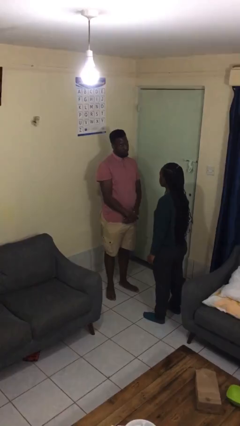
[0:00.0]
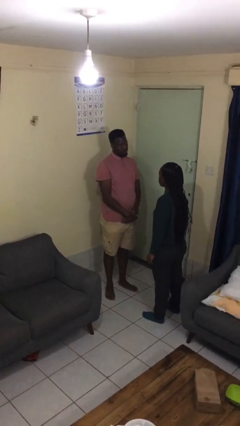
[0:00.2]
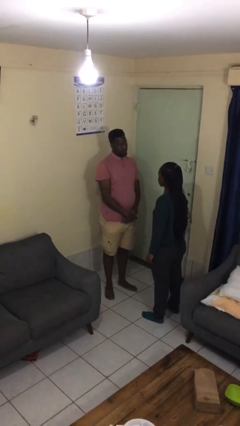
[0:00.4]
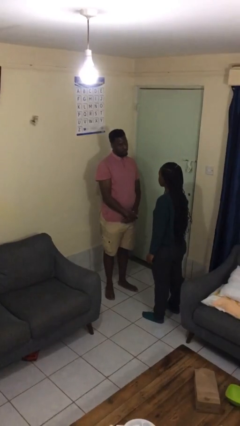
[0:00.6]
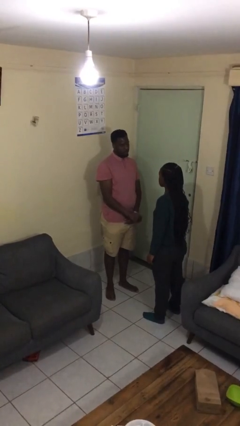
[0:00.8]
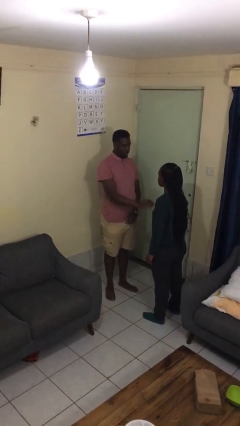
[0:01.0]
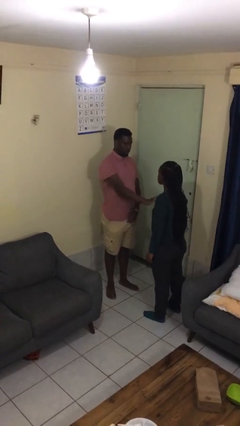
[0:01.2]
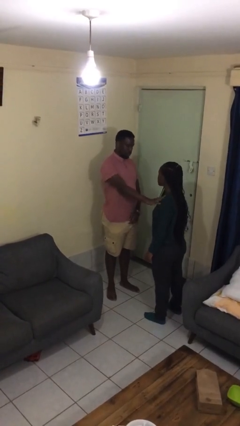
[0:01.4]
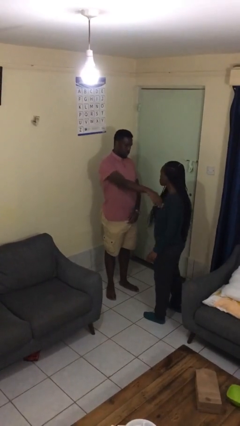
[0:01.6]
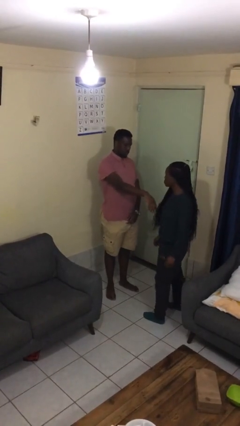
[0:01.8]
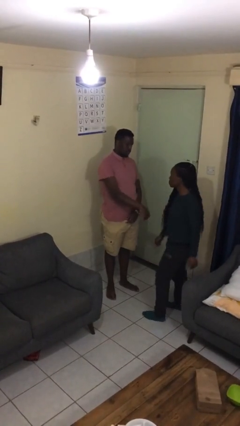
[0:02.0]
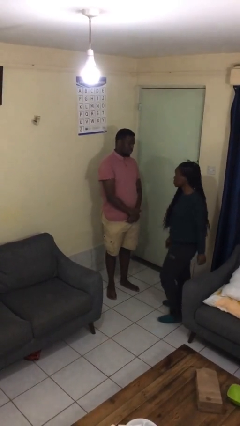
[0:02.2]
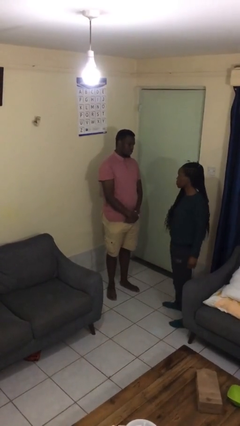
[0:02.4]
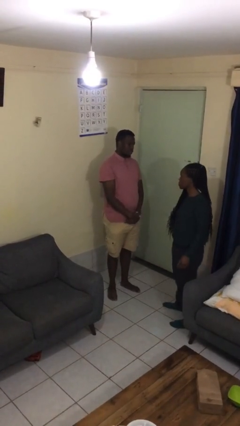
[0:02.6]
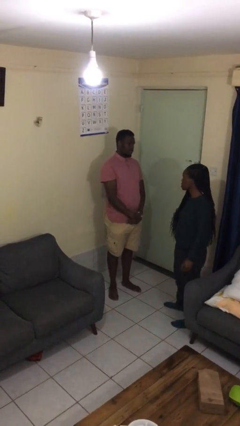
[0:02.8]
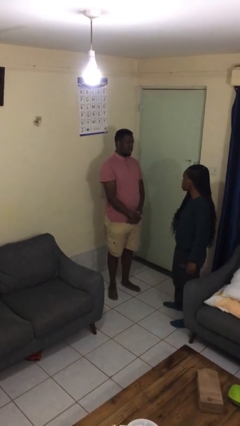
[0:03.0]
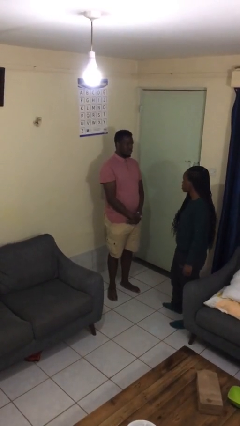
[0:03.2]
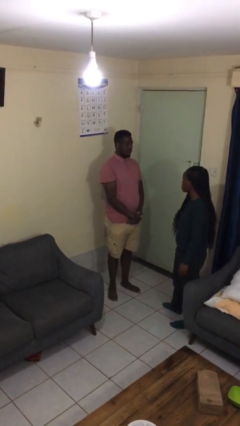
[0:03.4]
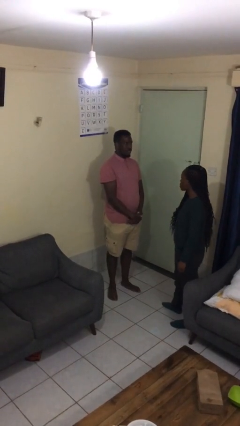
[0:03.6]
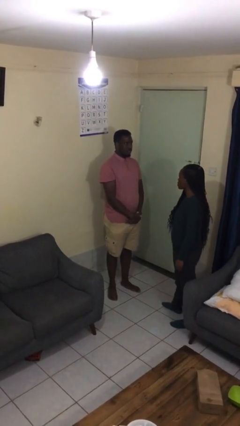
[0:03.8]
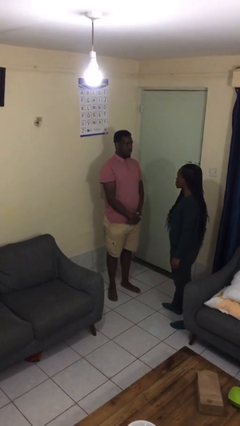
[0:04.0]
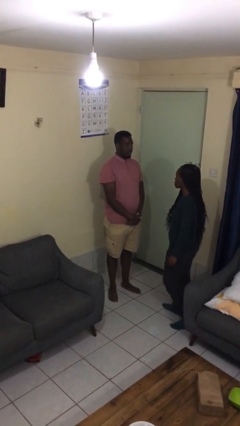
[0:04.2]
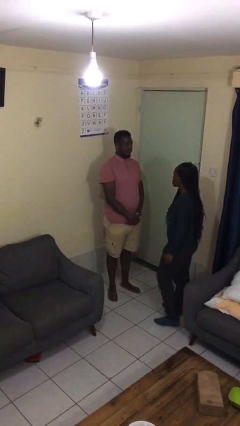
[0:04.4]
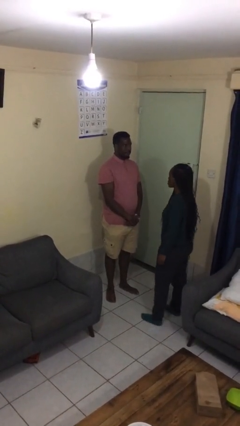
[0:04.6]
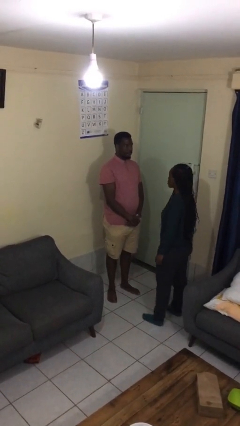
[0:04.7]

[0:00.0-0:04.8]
person shoves person

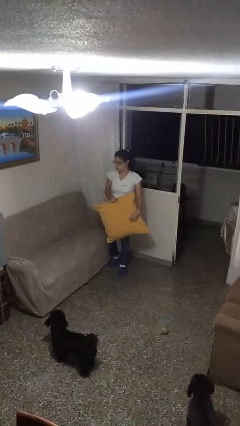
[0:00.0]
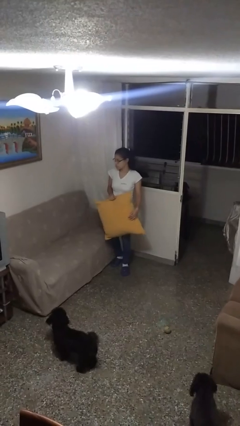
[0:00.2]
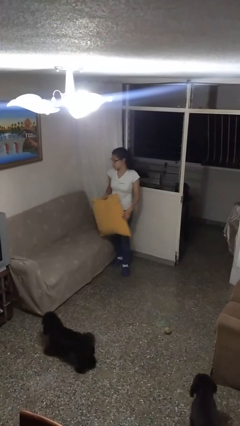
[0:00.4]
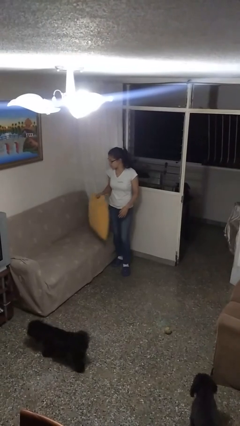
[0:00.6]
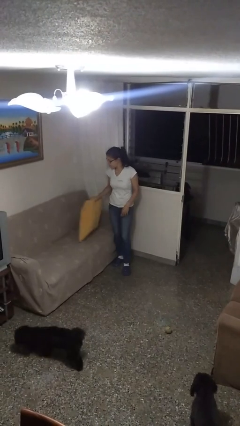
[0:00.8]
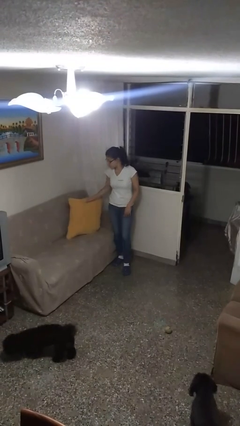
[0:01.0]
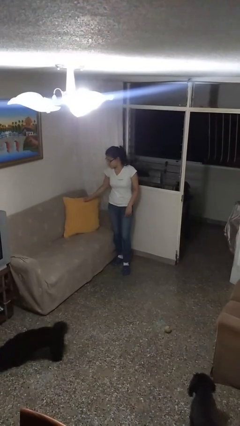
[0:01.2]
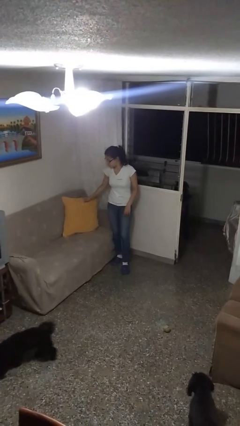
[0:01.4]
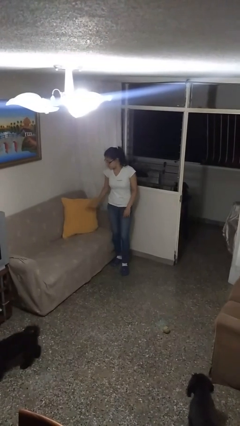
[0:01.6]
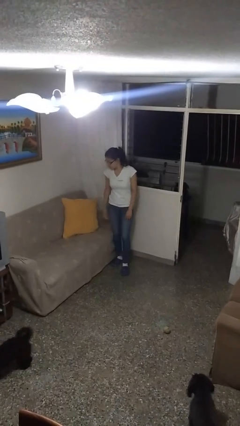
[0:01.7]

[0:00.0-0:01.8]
person puts down object on couch

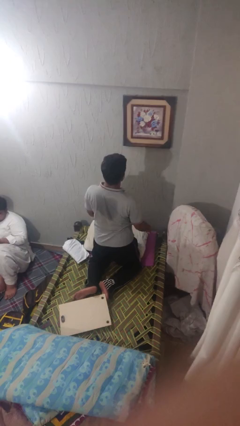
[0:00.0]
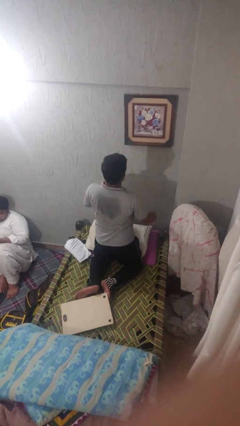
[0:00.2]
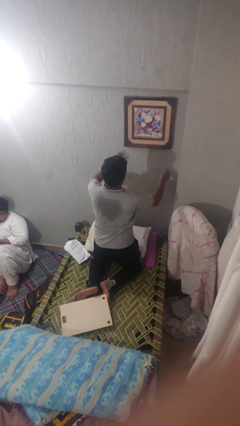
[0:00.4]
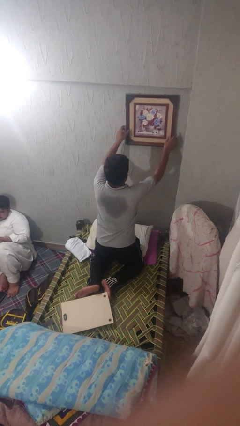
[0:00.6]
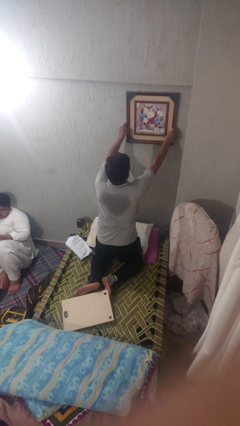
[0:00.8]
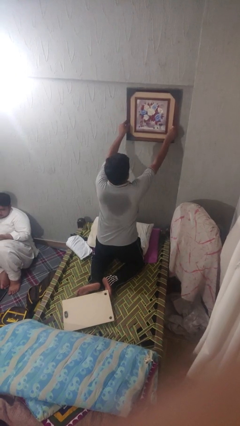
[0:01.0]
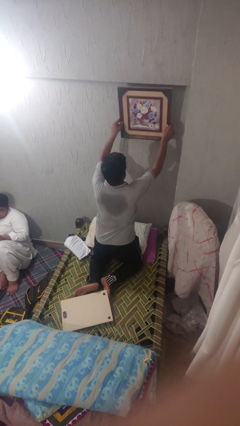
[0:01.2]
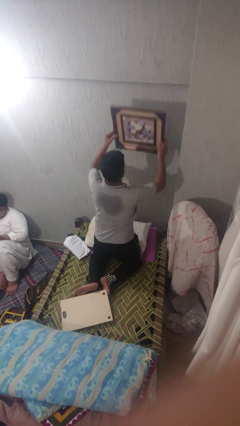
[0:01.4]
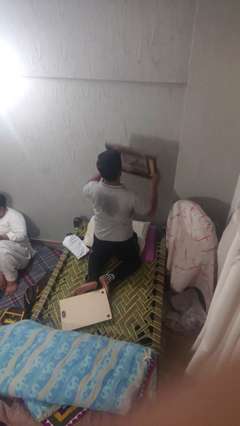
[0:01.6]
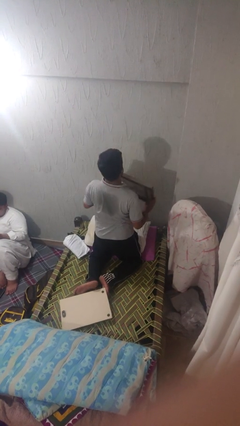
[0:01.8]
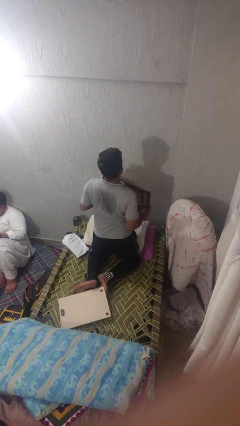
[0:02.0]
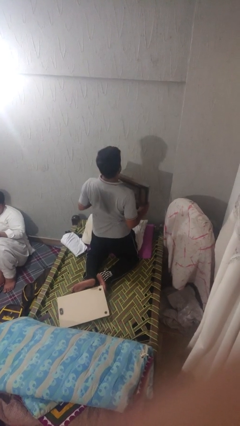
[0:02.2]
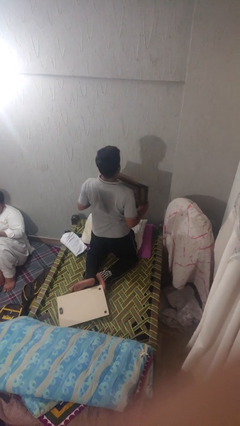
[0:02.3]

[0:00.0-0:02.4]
person takes down picture frame

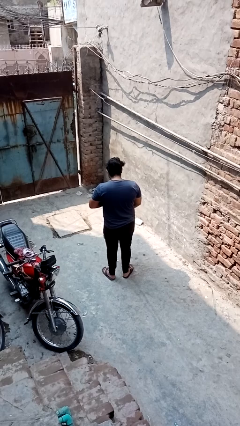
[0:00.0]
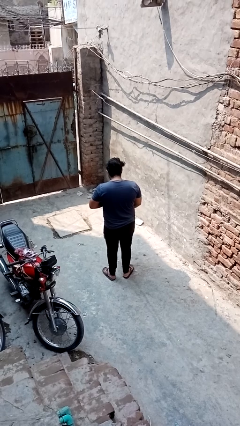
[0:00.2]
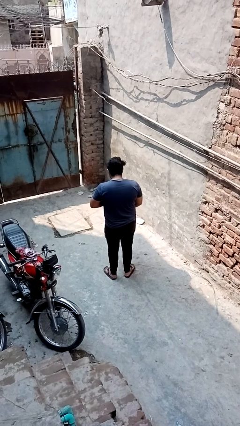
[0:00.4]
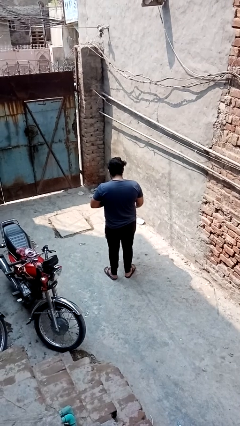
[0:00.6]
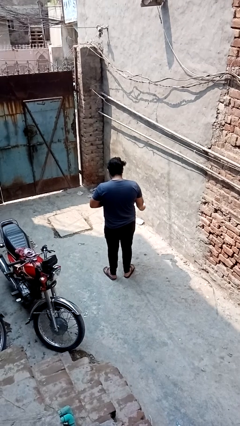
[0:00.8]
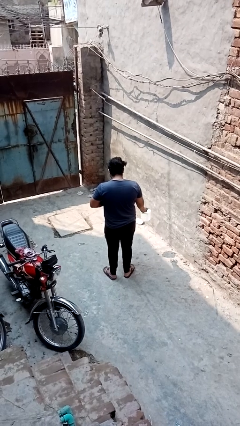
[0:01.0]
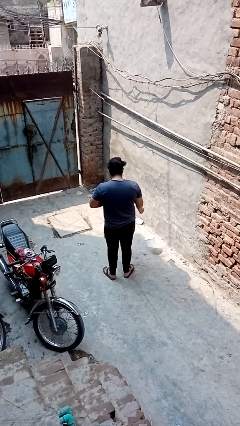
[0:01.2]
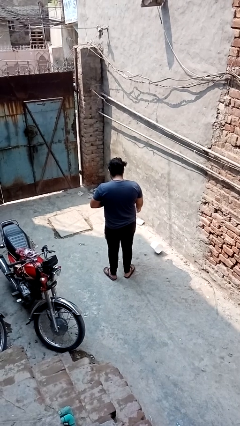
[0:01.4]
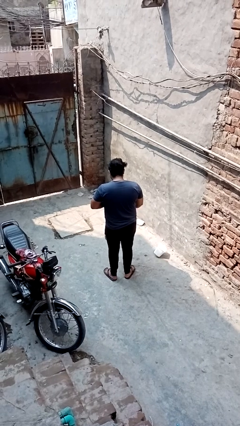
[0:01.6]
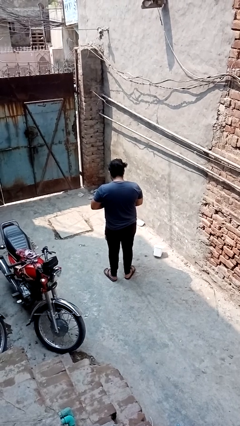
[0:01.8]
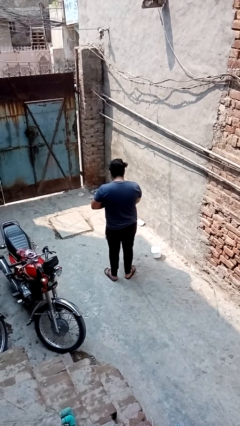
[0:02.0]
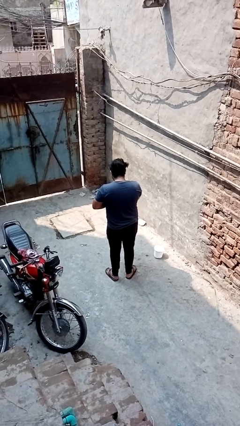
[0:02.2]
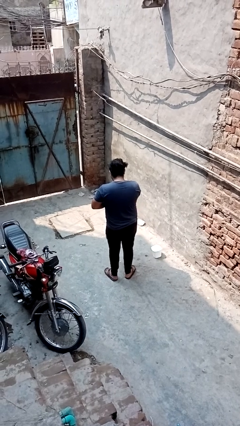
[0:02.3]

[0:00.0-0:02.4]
person cleans table with rag

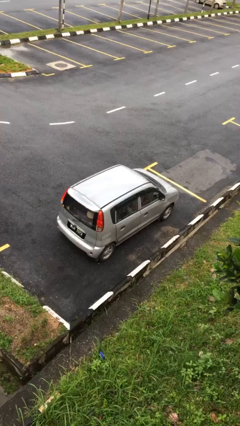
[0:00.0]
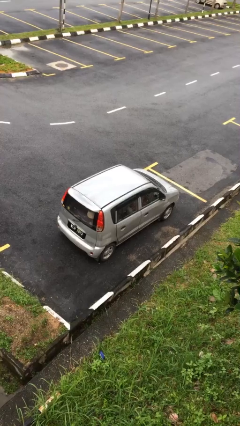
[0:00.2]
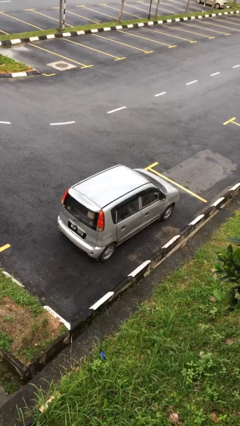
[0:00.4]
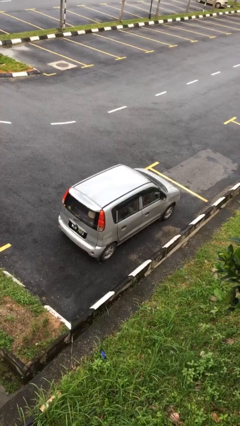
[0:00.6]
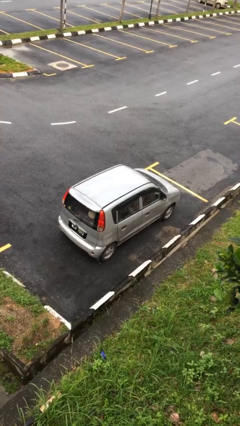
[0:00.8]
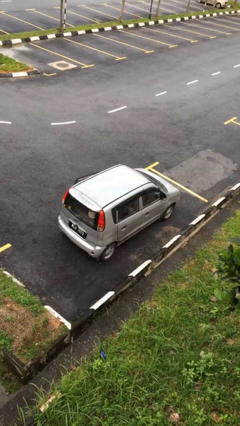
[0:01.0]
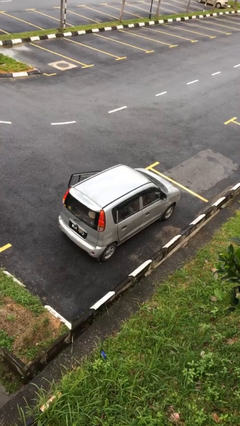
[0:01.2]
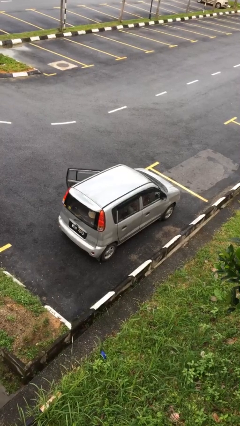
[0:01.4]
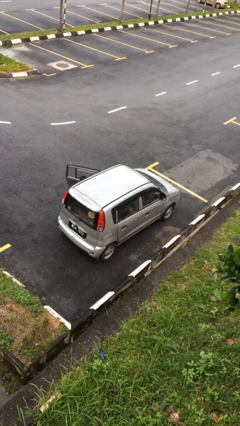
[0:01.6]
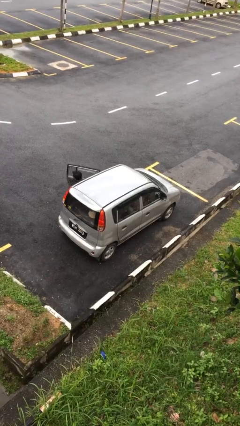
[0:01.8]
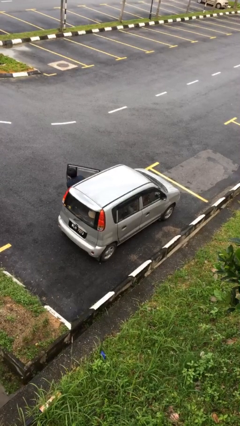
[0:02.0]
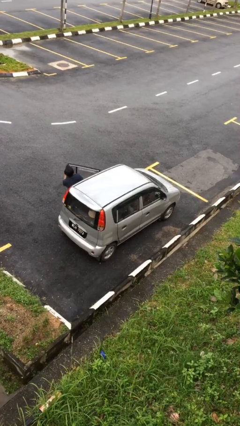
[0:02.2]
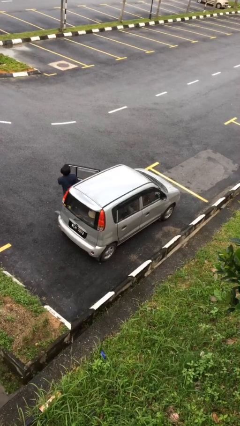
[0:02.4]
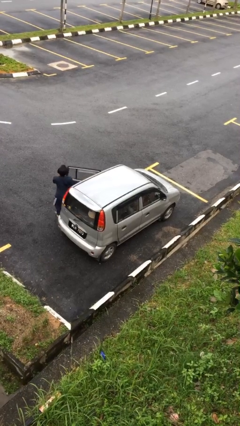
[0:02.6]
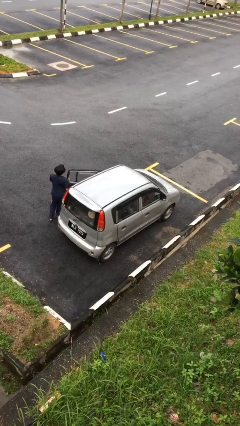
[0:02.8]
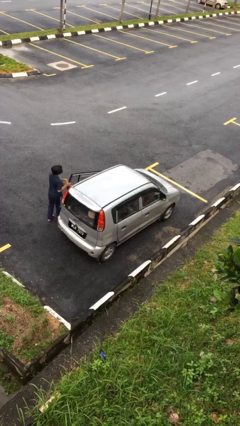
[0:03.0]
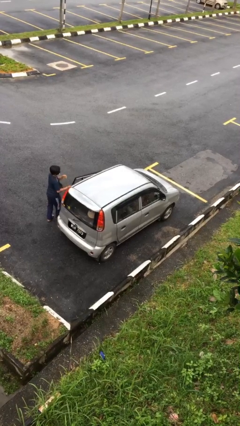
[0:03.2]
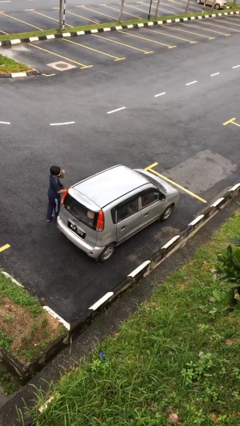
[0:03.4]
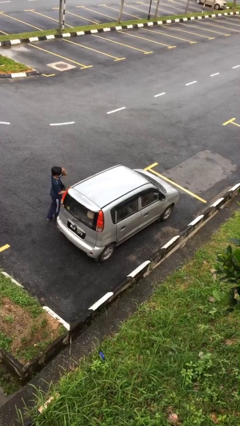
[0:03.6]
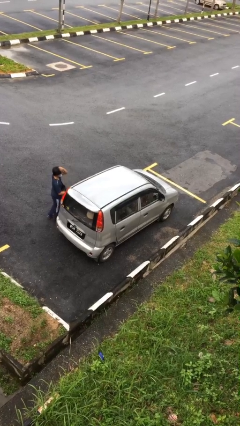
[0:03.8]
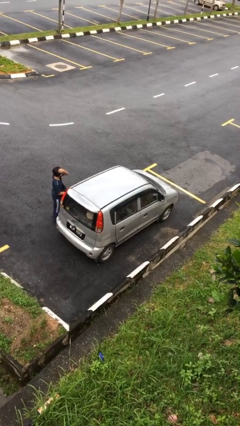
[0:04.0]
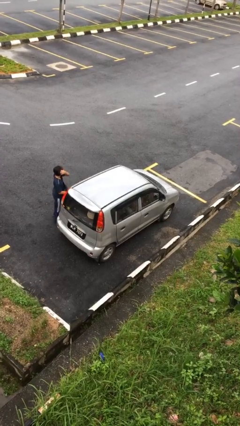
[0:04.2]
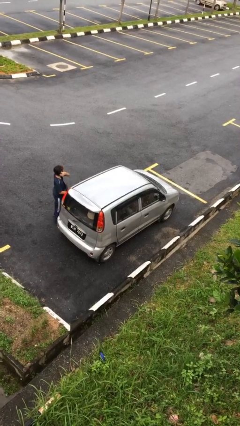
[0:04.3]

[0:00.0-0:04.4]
car drops off person

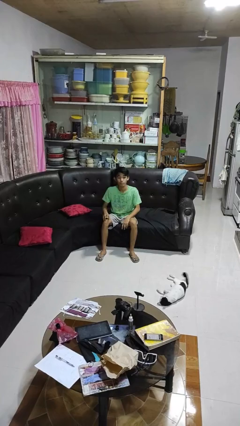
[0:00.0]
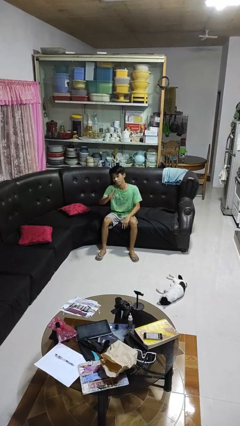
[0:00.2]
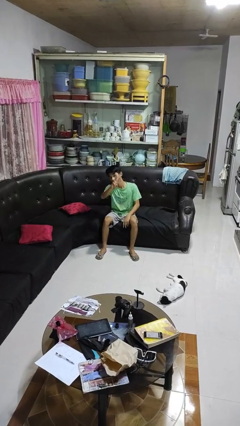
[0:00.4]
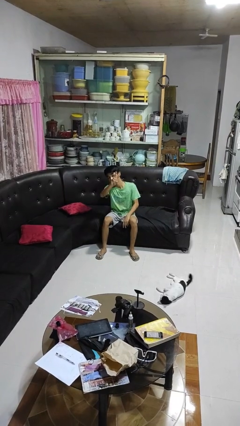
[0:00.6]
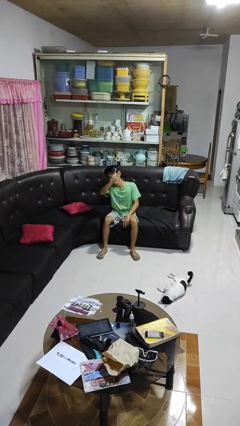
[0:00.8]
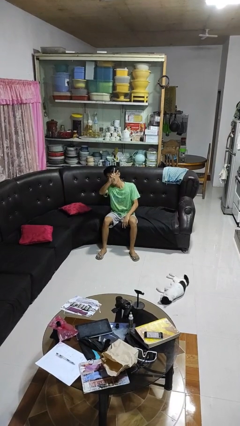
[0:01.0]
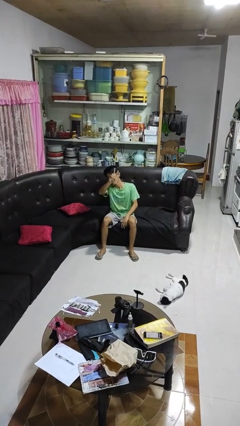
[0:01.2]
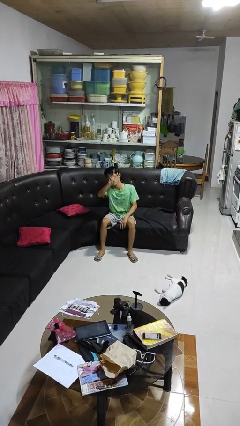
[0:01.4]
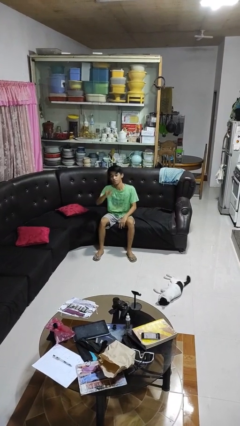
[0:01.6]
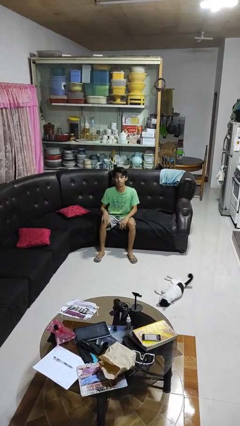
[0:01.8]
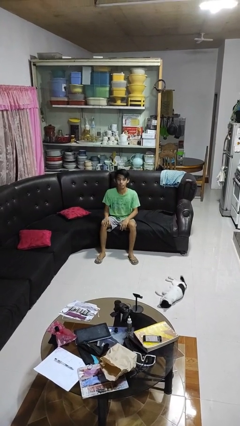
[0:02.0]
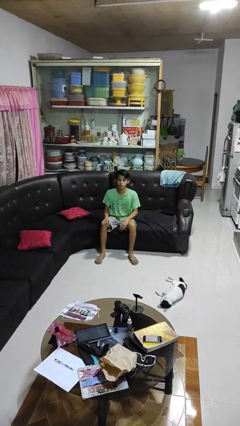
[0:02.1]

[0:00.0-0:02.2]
person gestures peace
